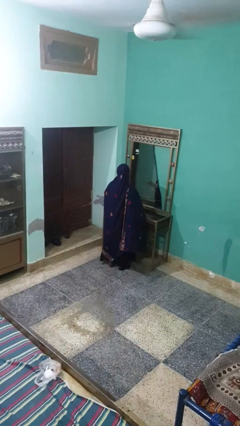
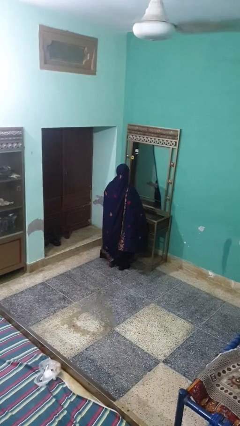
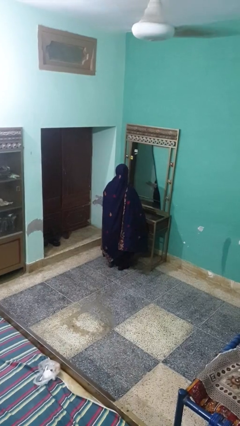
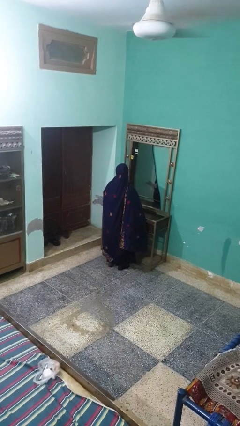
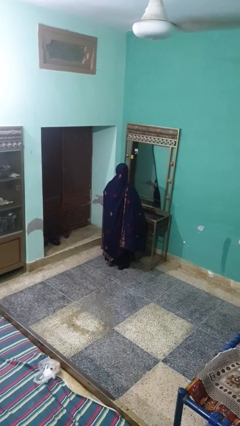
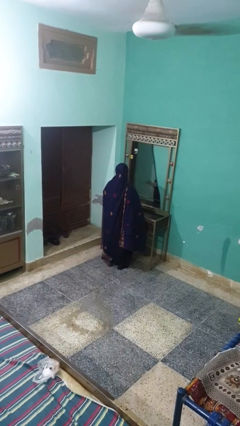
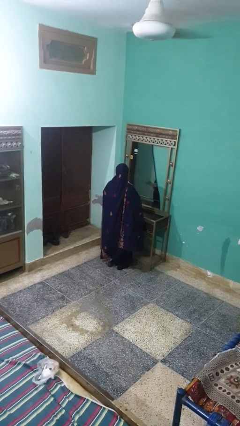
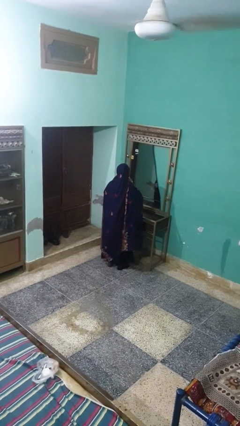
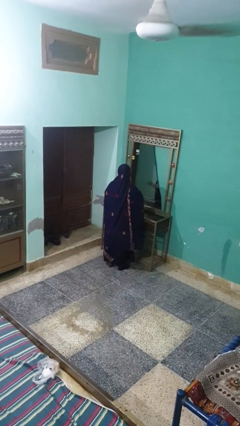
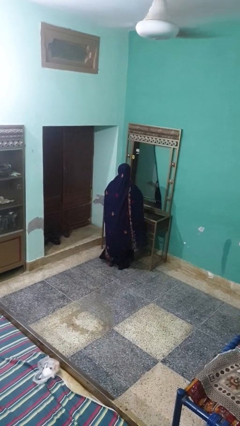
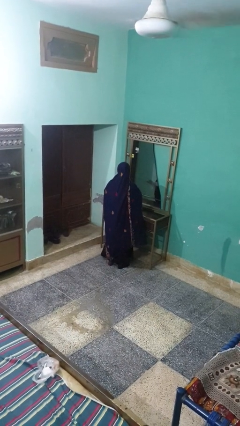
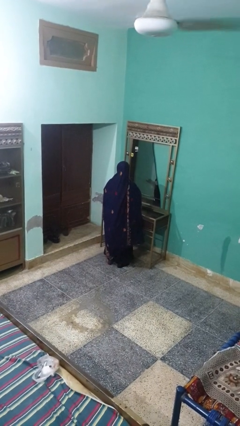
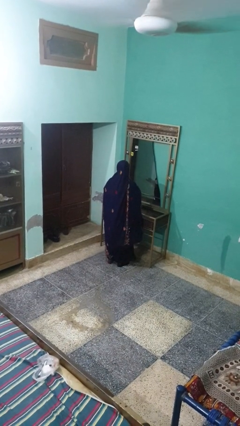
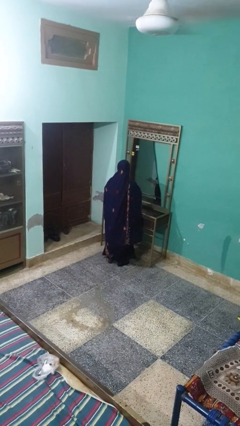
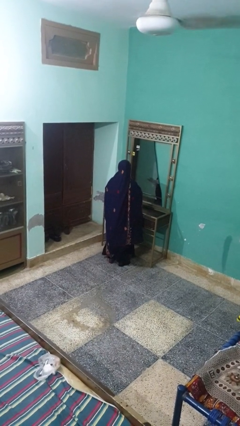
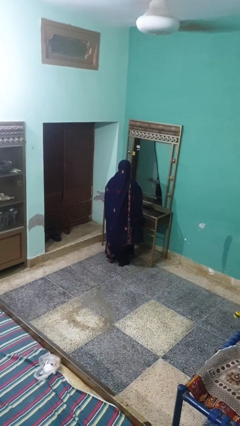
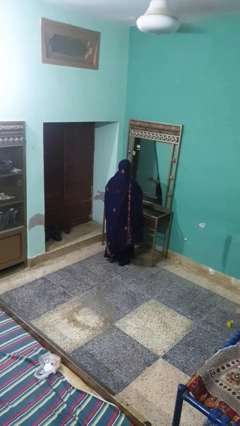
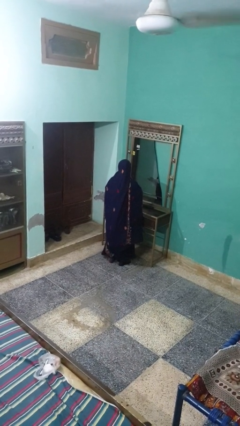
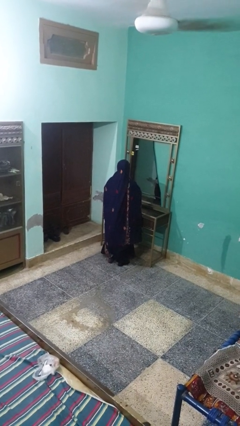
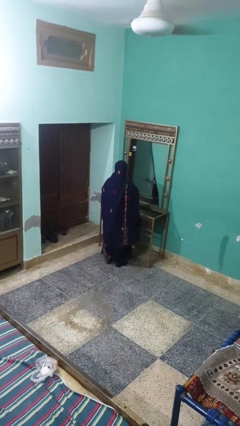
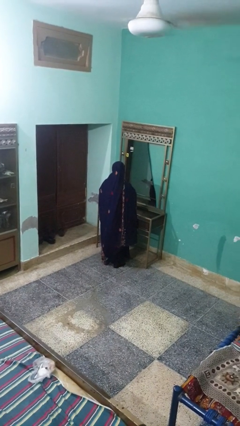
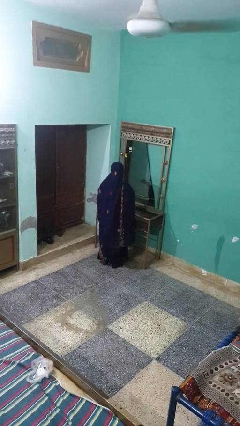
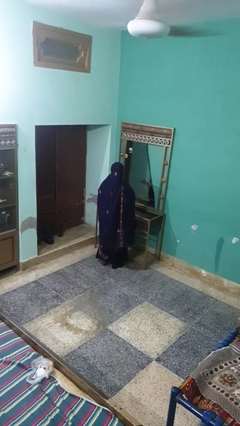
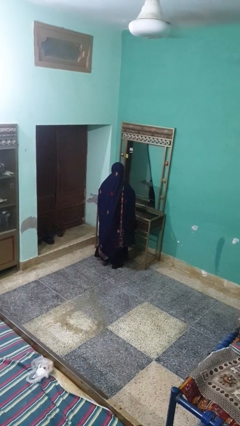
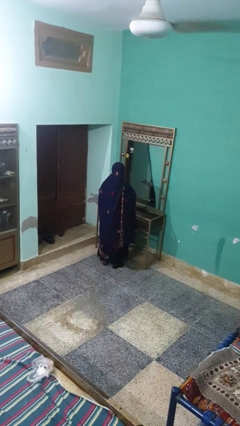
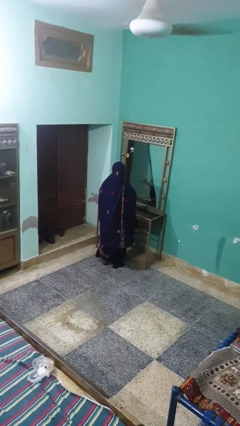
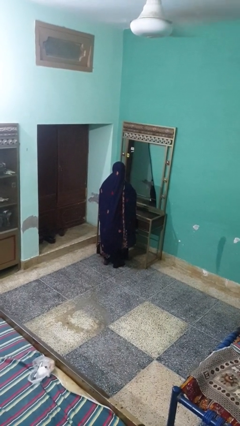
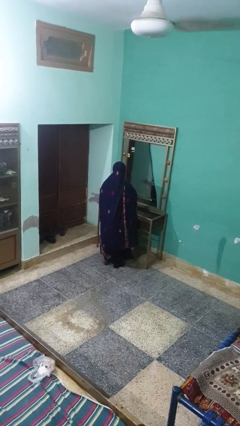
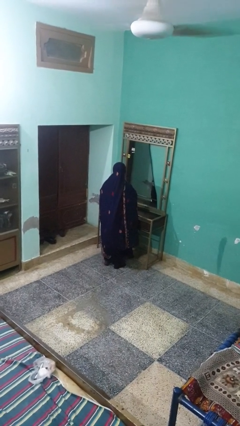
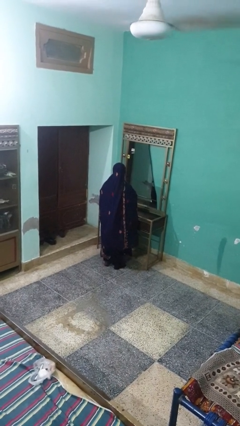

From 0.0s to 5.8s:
person applies lip makeup

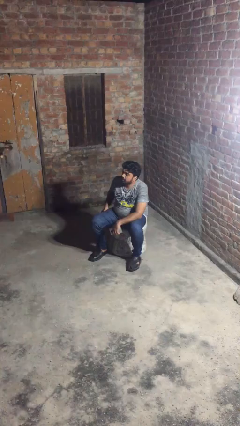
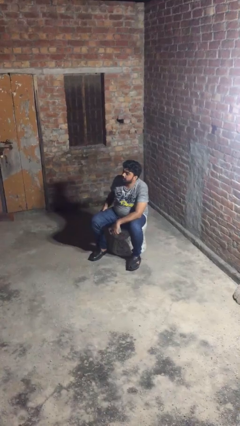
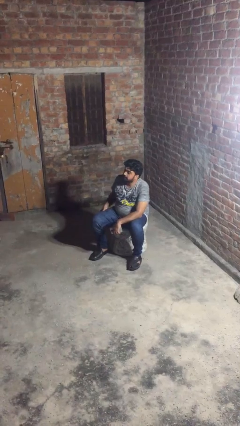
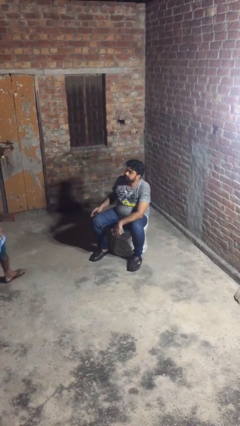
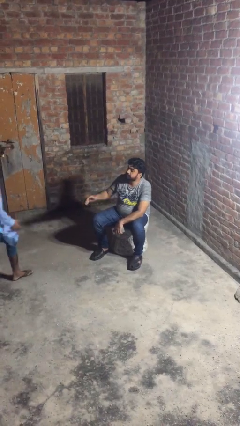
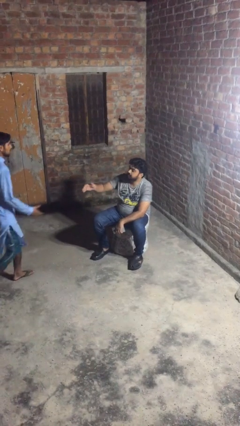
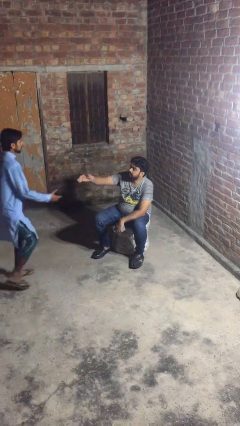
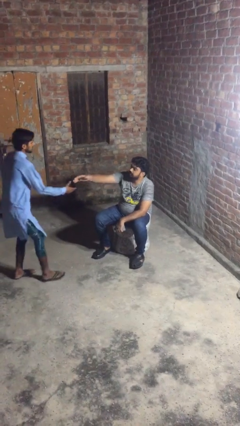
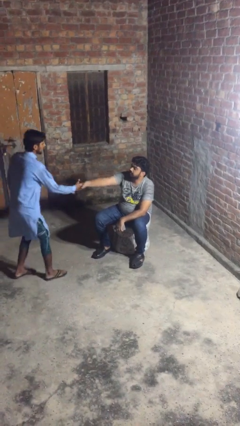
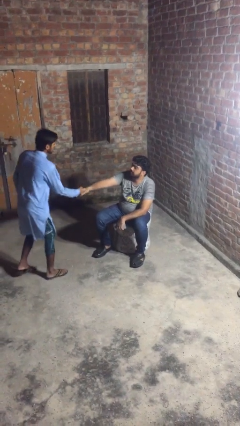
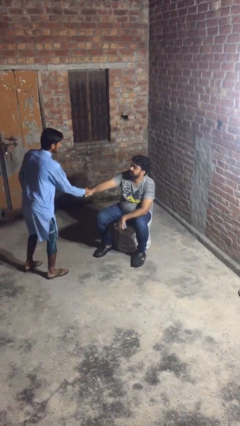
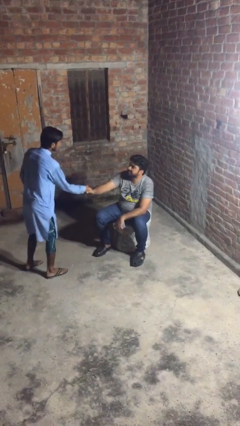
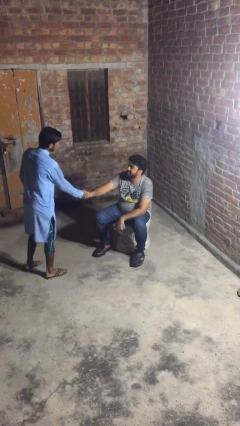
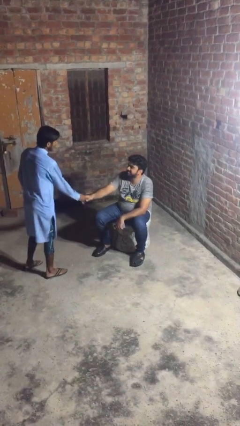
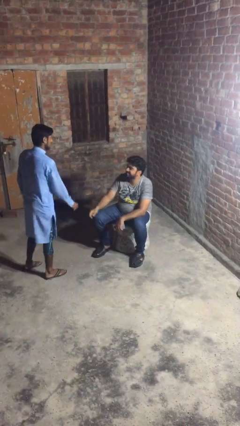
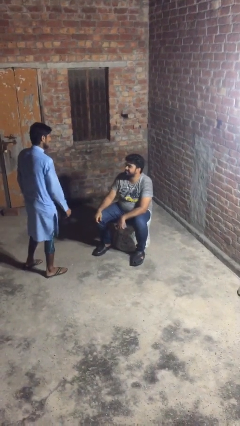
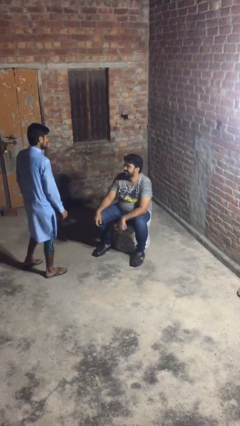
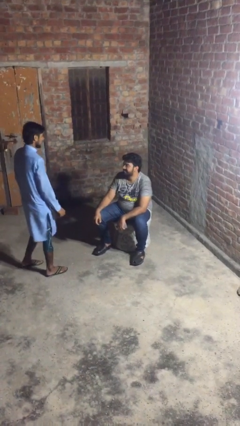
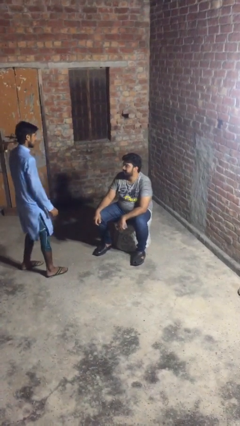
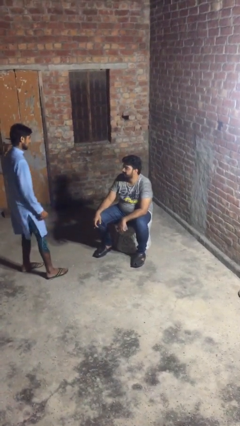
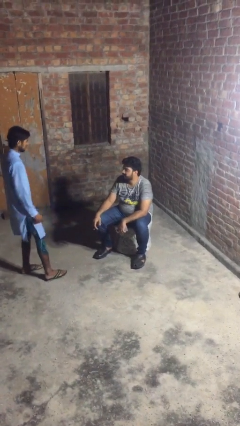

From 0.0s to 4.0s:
person shakes hand

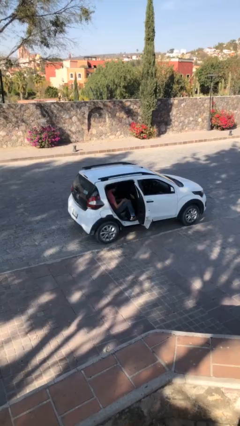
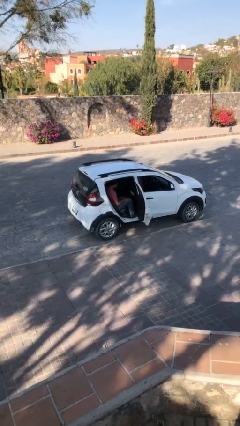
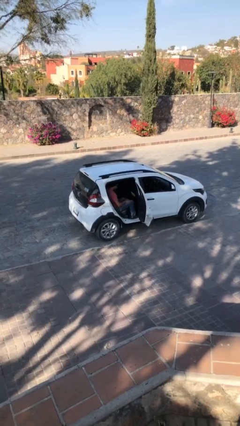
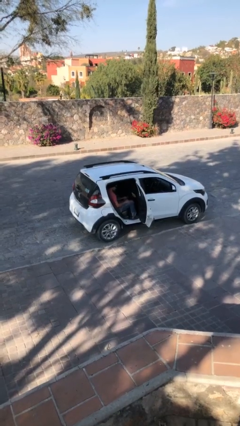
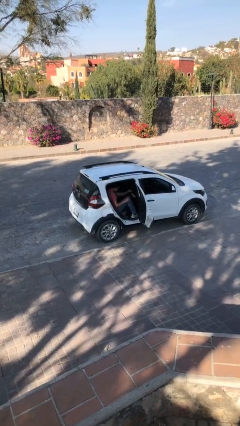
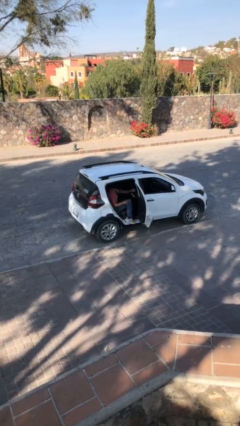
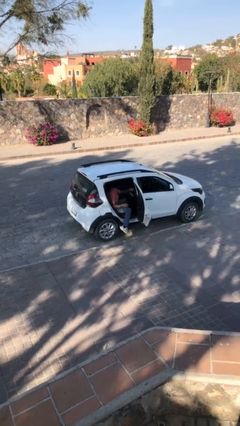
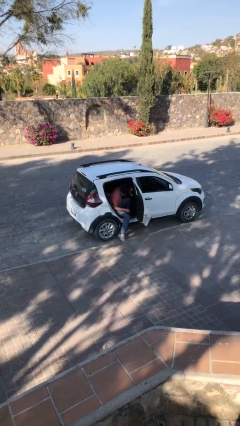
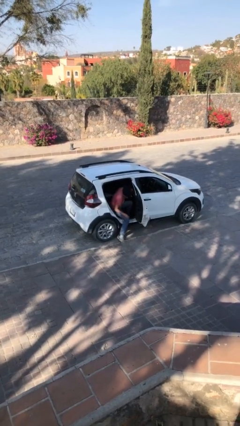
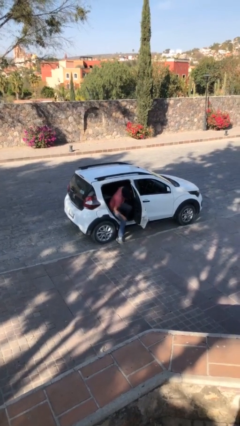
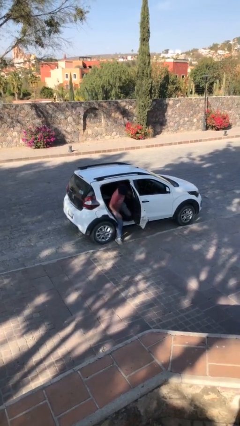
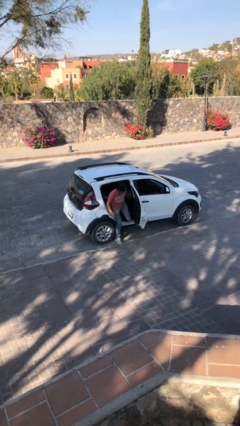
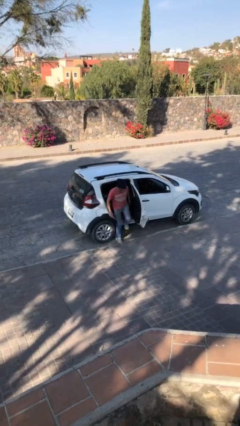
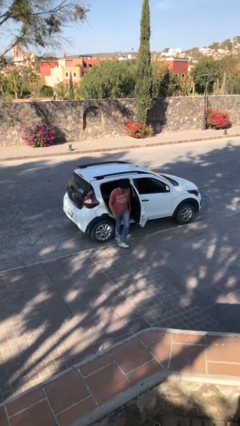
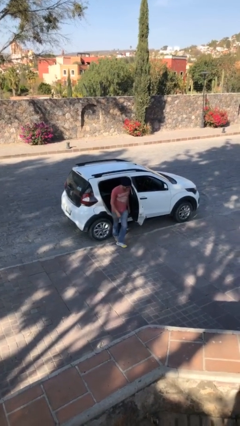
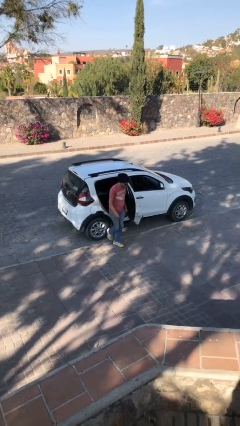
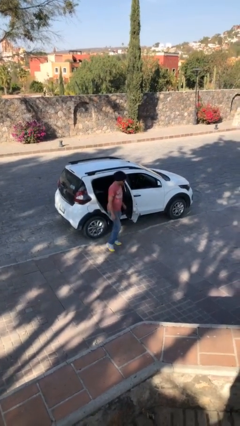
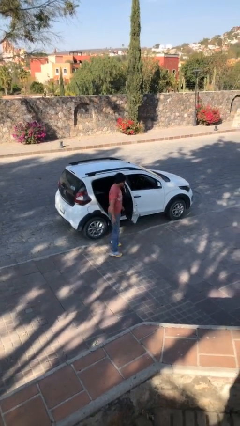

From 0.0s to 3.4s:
person exits car

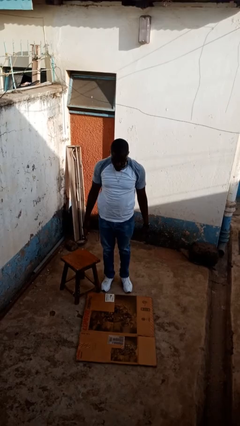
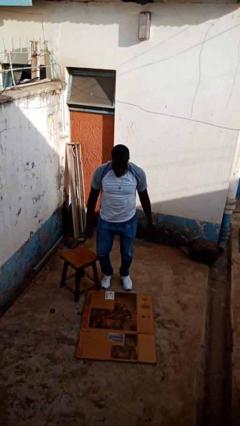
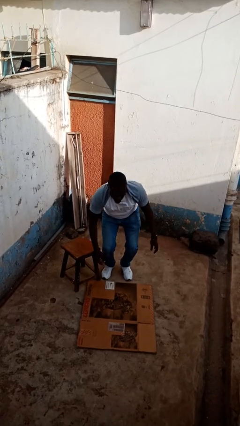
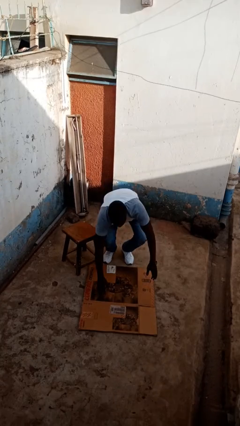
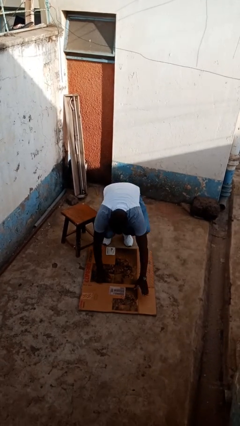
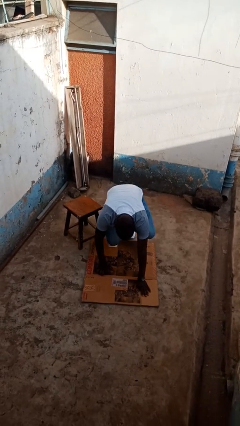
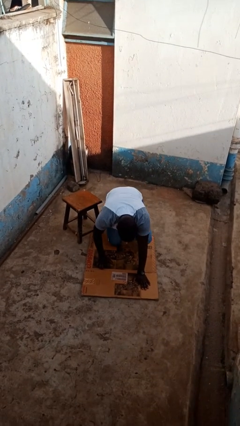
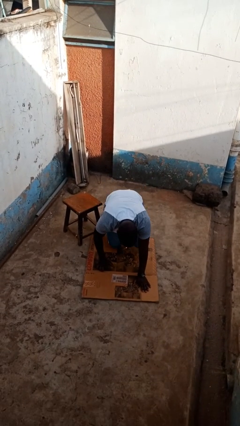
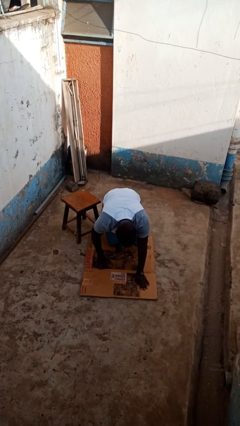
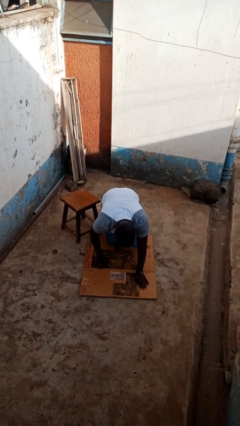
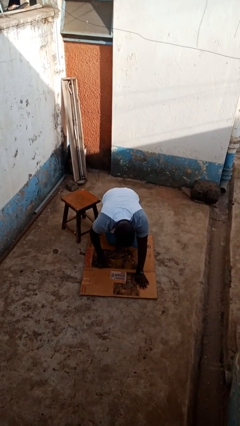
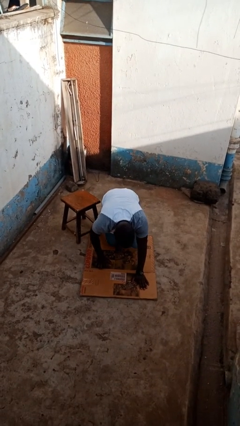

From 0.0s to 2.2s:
person trips on object on floor

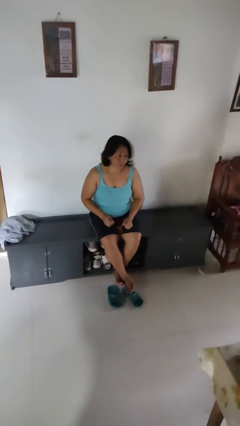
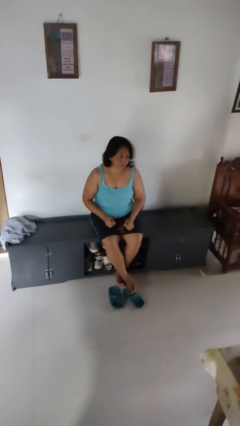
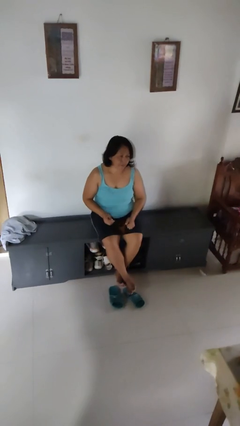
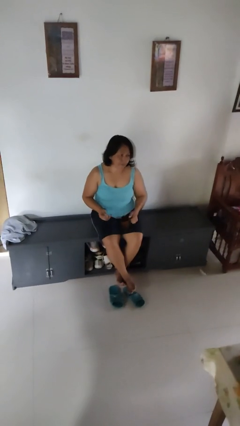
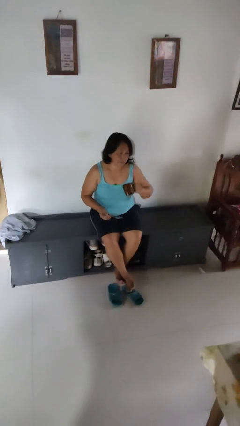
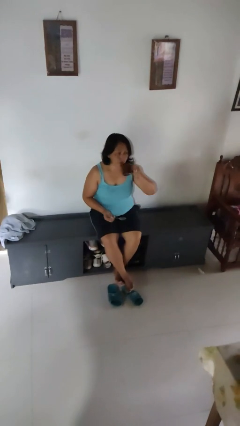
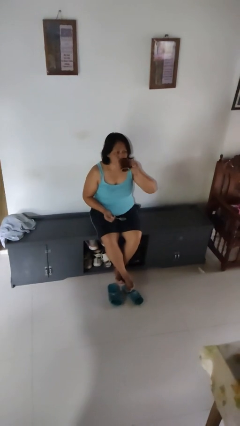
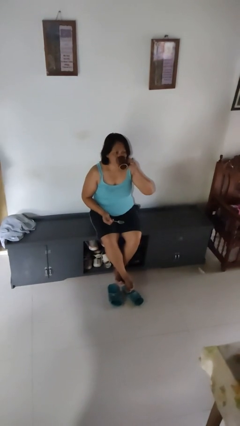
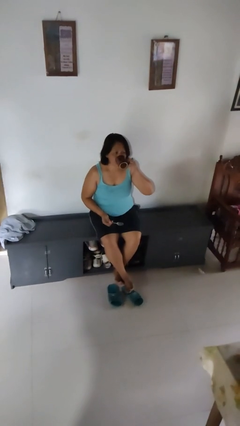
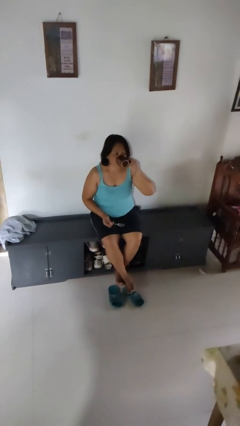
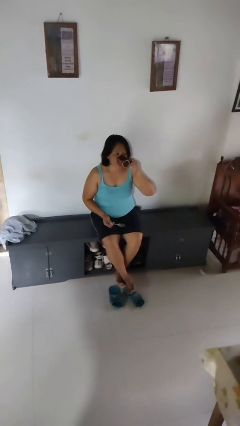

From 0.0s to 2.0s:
person drinks from mug

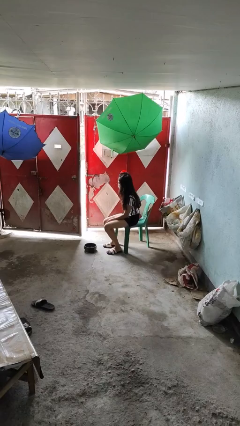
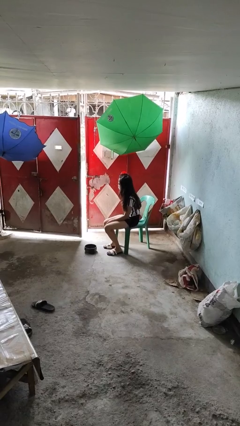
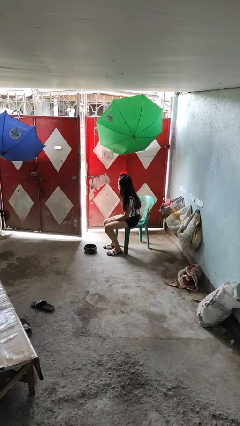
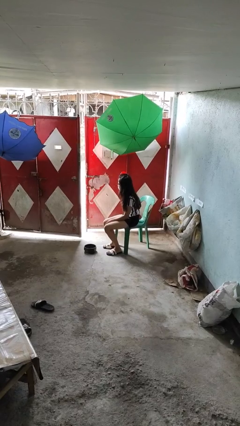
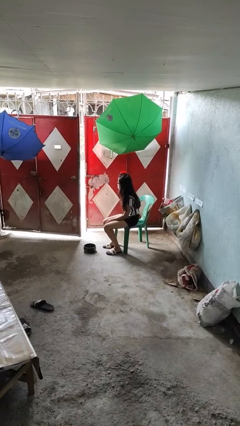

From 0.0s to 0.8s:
person puts phone into pocket
